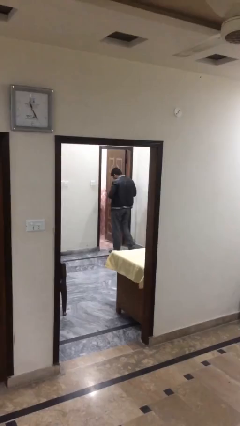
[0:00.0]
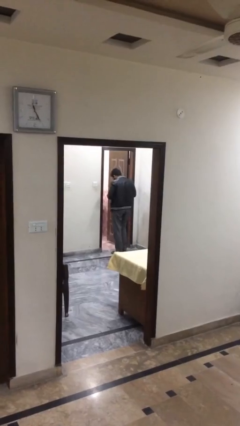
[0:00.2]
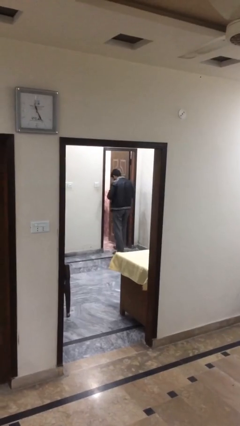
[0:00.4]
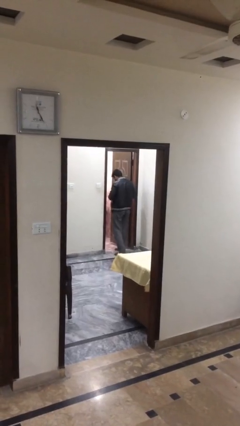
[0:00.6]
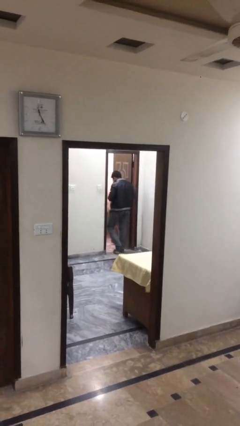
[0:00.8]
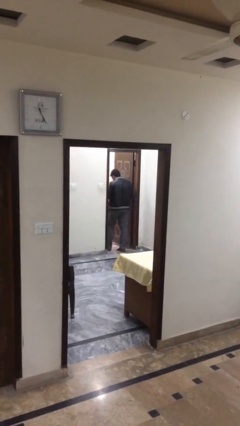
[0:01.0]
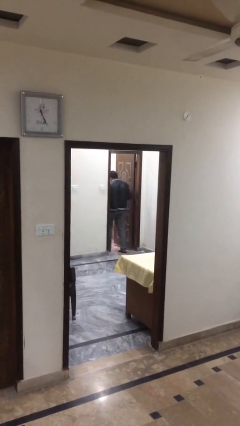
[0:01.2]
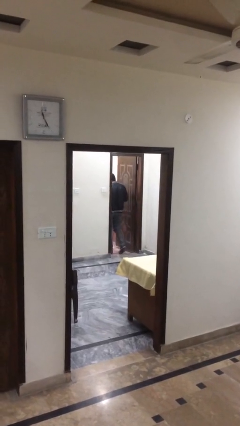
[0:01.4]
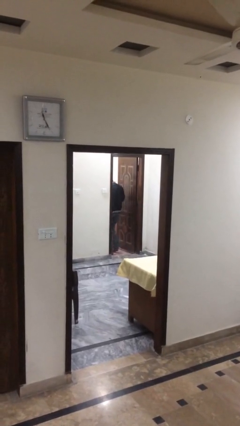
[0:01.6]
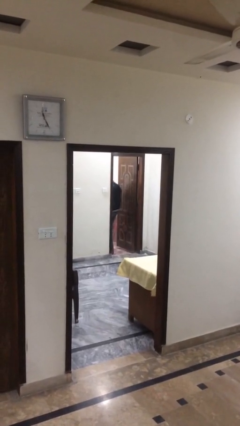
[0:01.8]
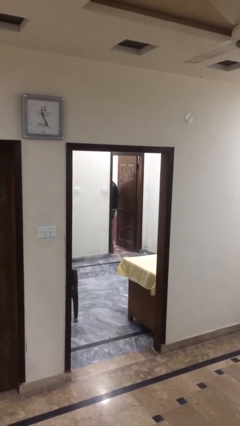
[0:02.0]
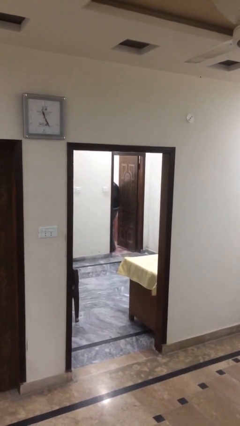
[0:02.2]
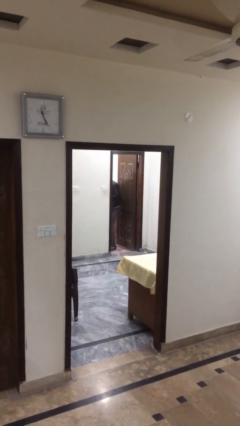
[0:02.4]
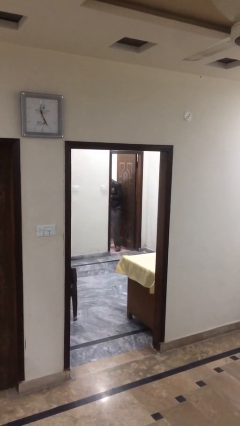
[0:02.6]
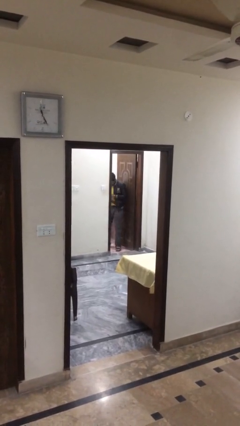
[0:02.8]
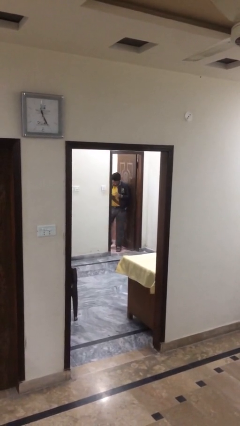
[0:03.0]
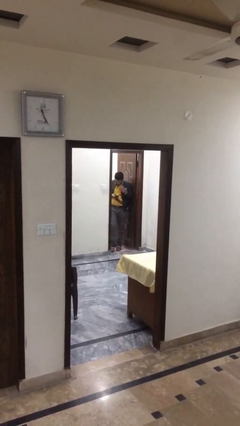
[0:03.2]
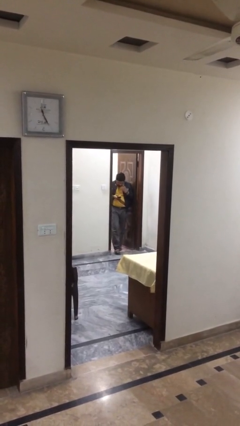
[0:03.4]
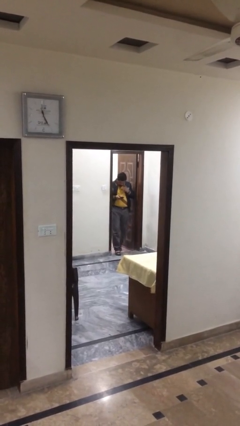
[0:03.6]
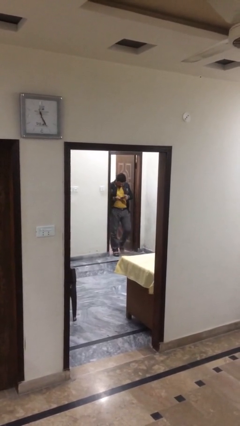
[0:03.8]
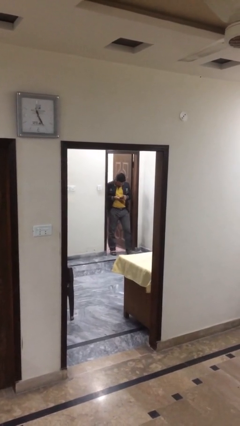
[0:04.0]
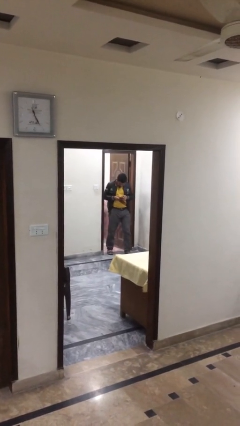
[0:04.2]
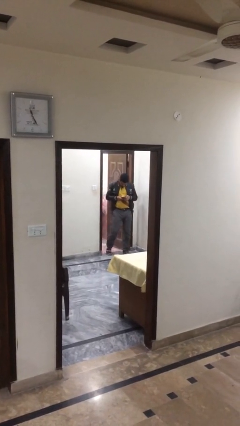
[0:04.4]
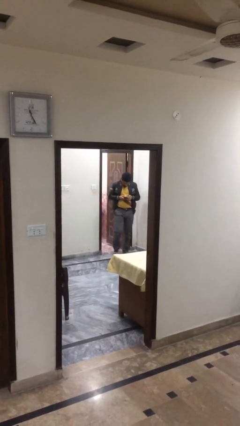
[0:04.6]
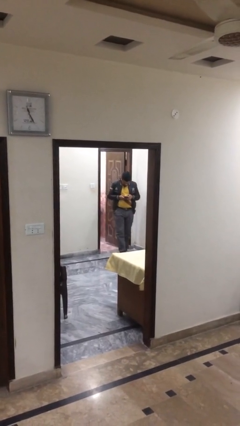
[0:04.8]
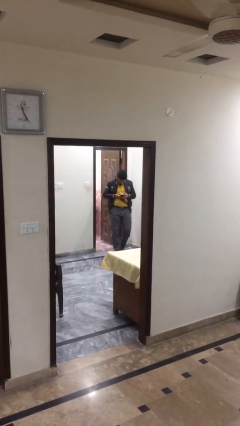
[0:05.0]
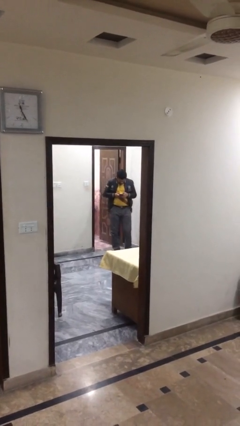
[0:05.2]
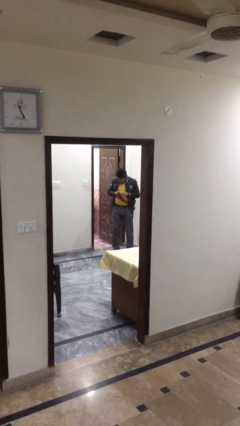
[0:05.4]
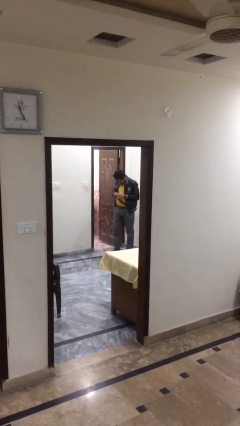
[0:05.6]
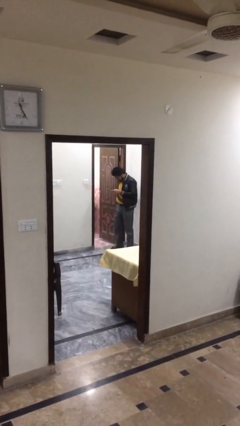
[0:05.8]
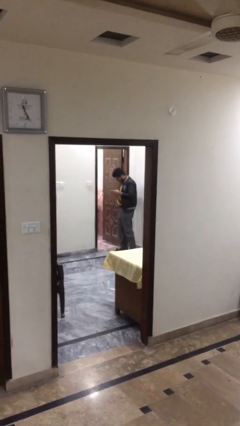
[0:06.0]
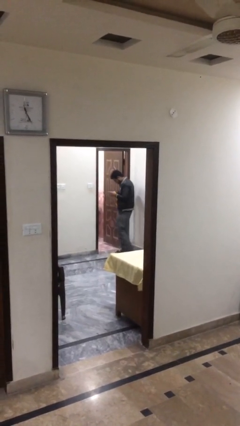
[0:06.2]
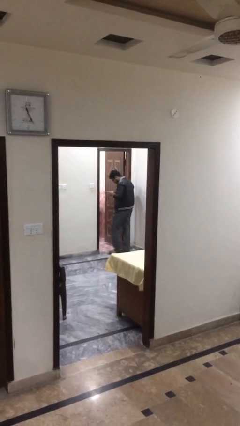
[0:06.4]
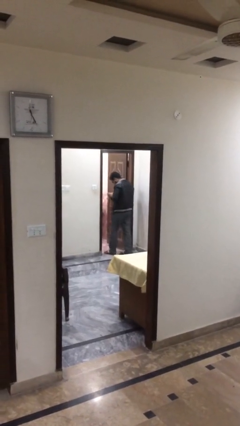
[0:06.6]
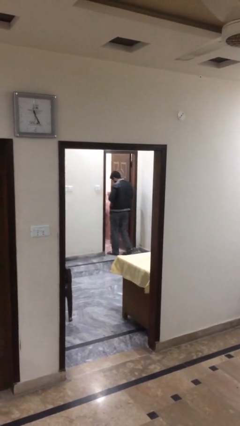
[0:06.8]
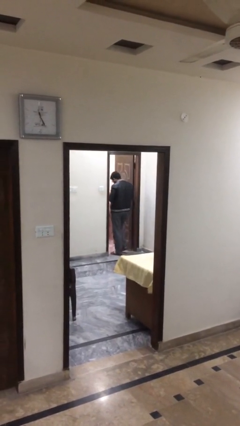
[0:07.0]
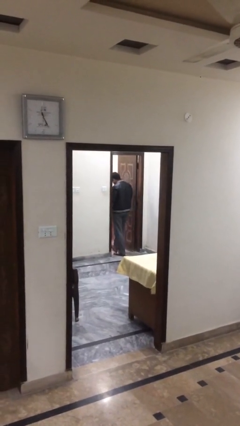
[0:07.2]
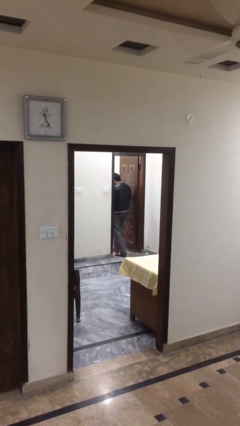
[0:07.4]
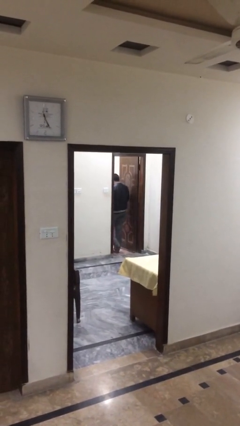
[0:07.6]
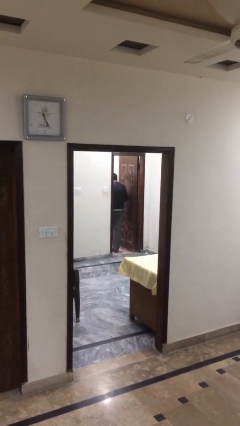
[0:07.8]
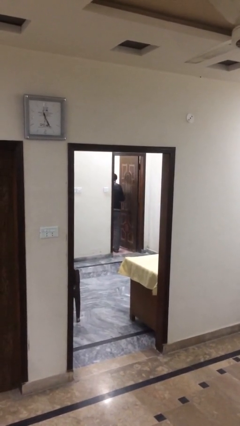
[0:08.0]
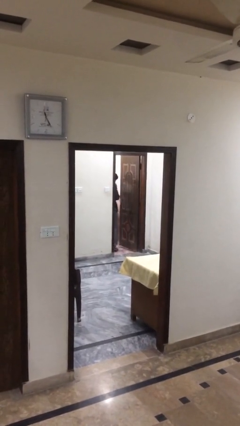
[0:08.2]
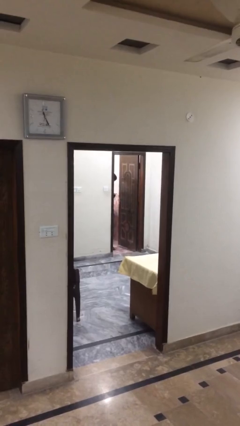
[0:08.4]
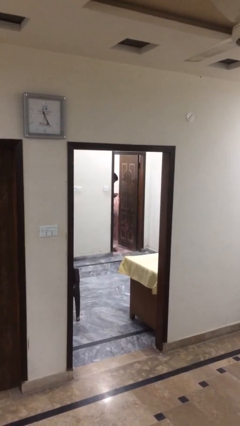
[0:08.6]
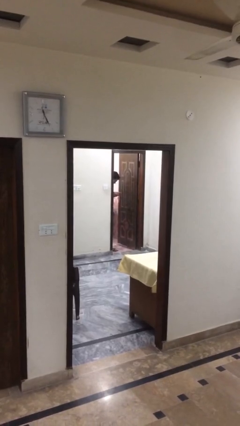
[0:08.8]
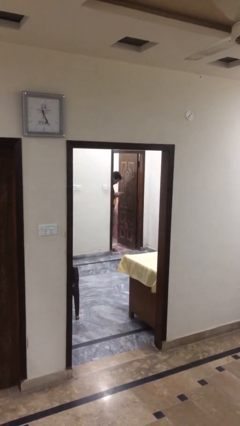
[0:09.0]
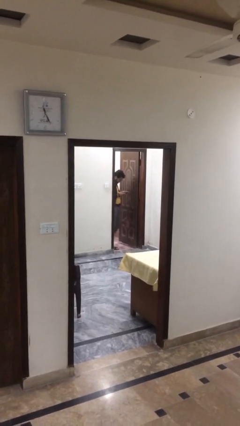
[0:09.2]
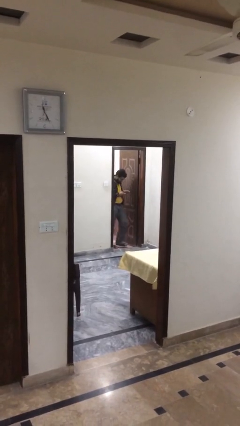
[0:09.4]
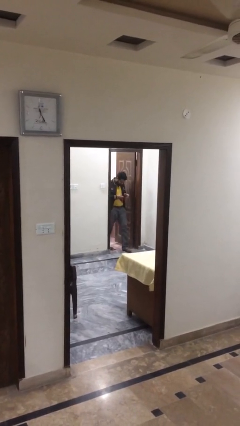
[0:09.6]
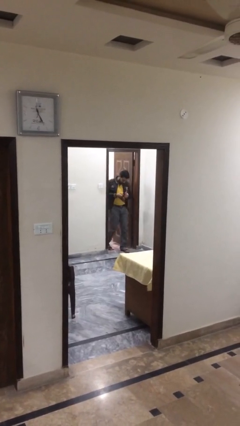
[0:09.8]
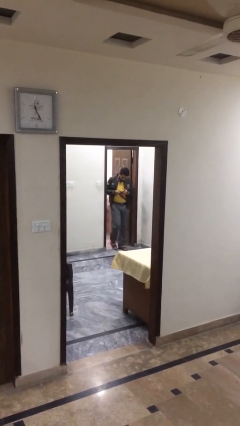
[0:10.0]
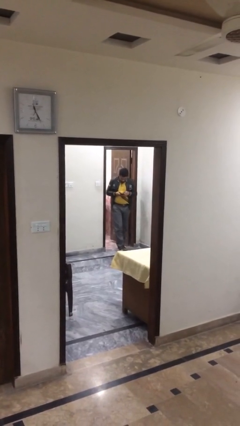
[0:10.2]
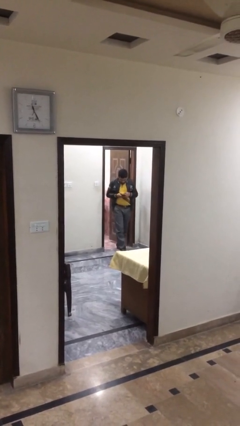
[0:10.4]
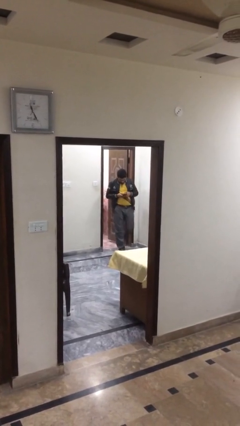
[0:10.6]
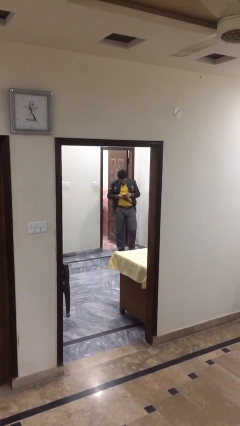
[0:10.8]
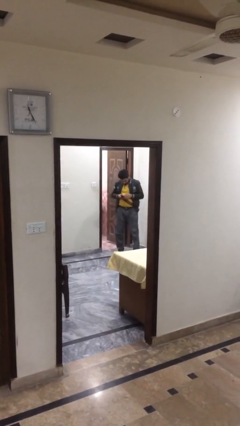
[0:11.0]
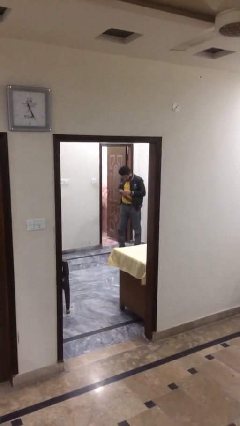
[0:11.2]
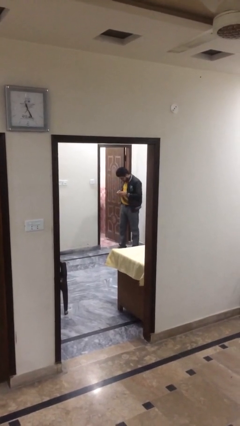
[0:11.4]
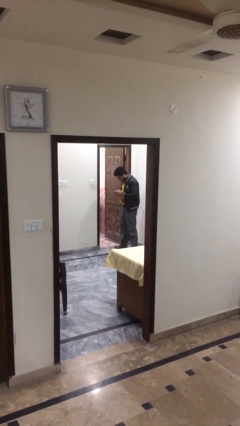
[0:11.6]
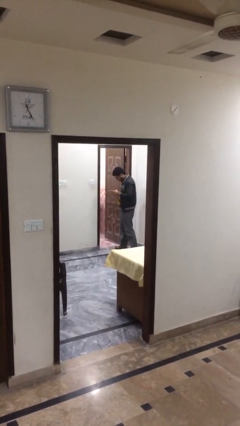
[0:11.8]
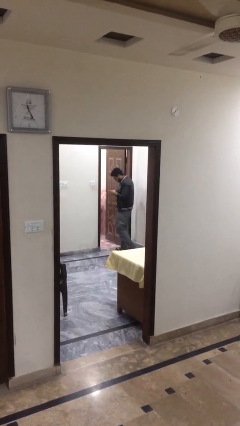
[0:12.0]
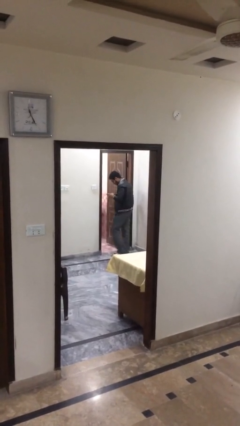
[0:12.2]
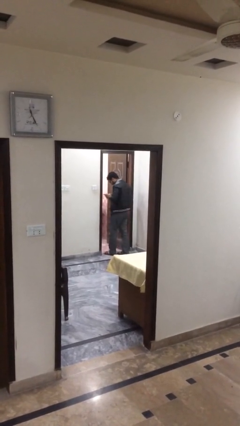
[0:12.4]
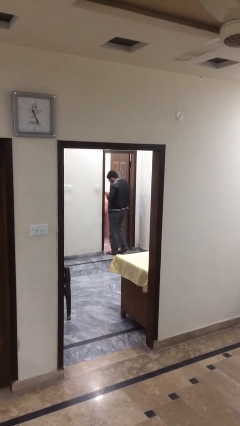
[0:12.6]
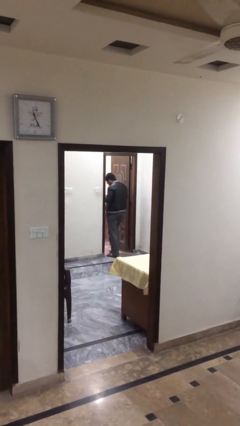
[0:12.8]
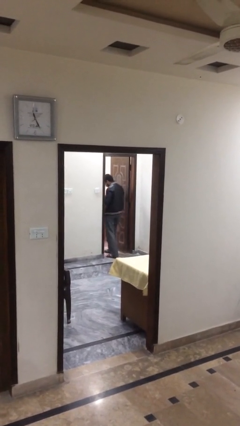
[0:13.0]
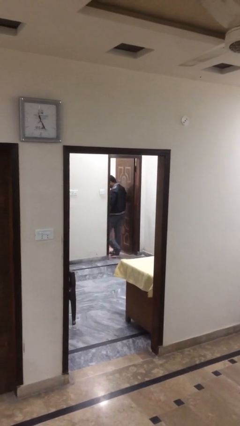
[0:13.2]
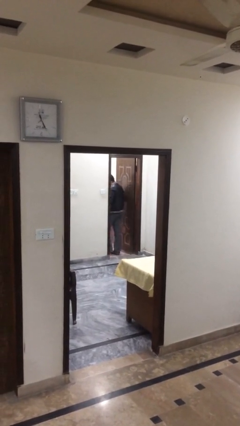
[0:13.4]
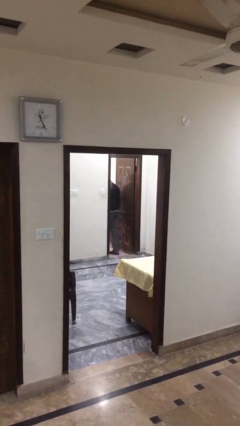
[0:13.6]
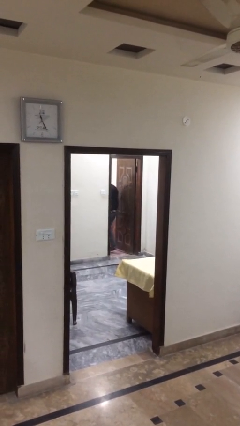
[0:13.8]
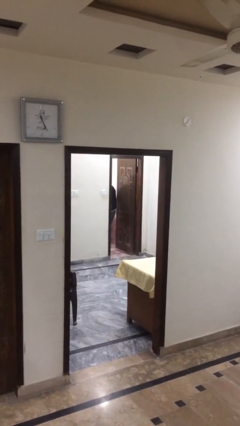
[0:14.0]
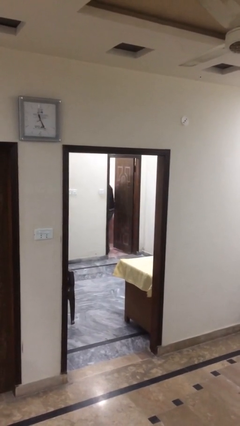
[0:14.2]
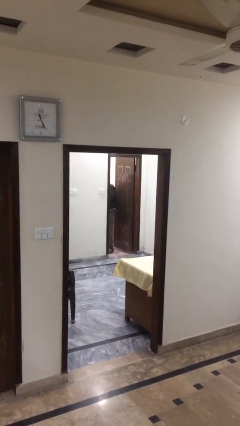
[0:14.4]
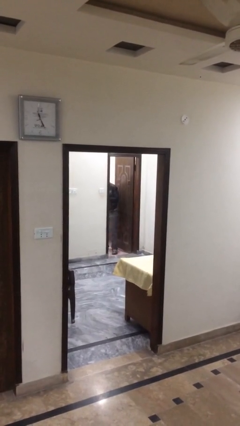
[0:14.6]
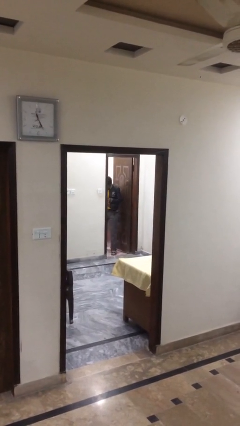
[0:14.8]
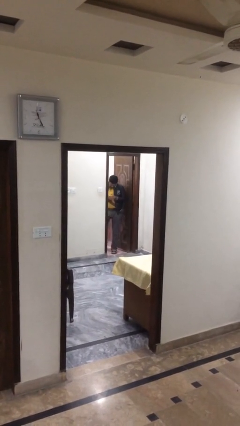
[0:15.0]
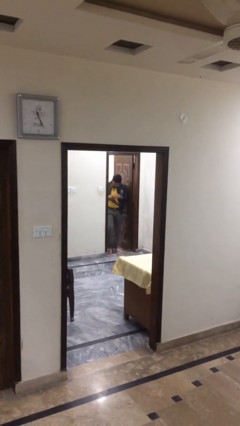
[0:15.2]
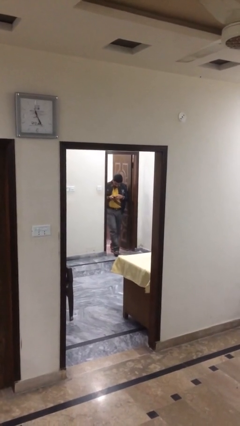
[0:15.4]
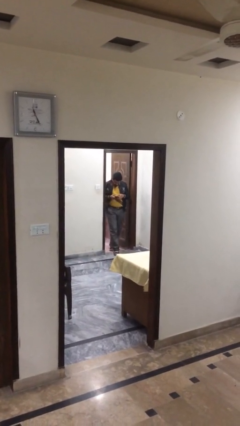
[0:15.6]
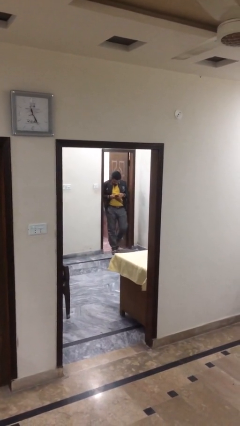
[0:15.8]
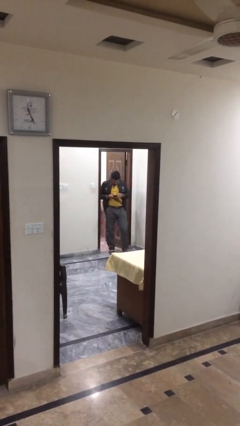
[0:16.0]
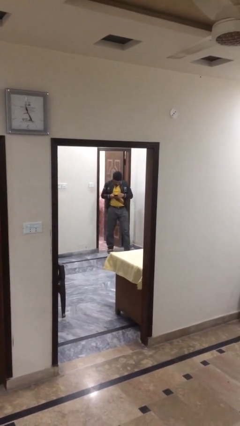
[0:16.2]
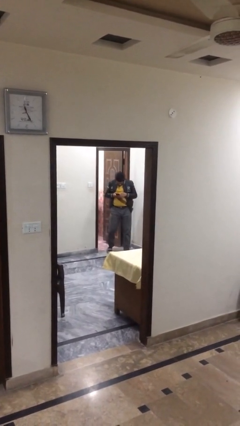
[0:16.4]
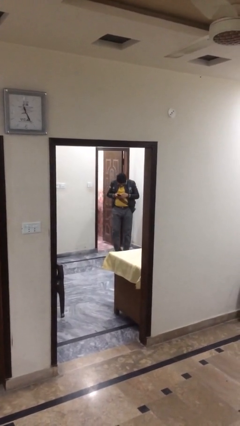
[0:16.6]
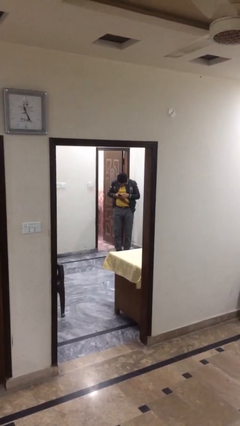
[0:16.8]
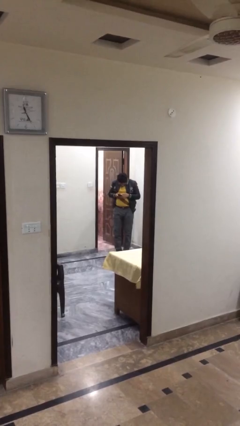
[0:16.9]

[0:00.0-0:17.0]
person texts on phone

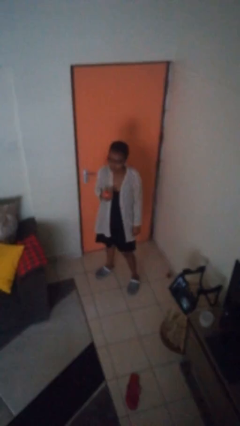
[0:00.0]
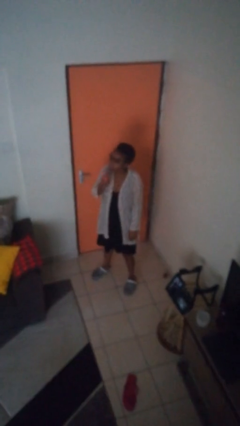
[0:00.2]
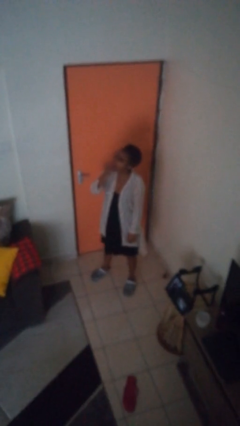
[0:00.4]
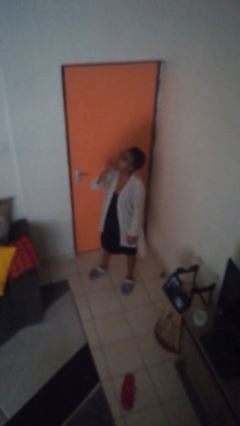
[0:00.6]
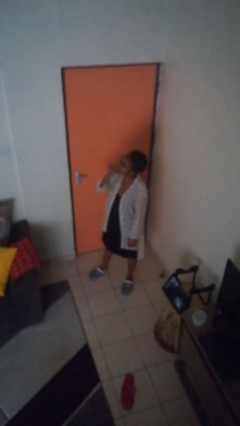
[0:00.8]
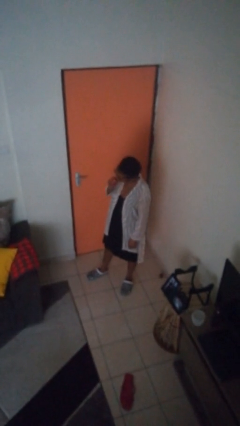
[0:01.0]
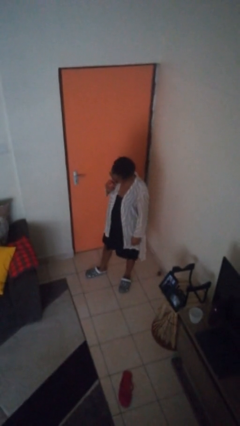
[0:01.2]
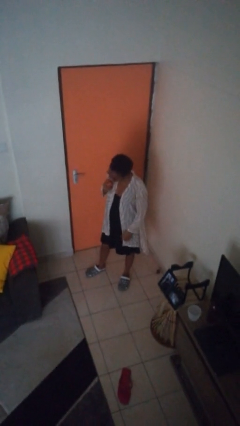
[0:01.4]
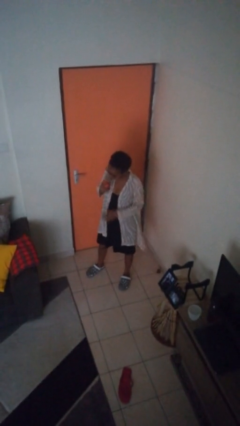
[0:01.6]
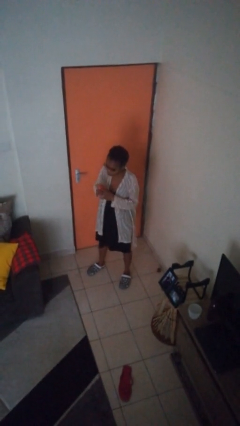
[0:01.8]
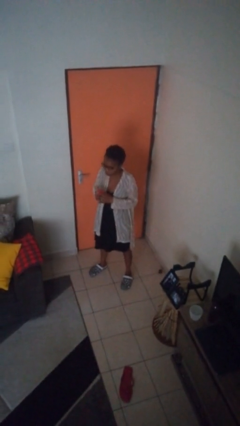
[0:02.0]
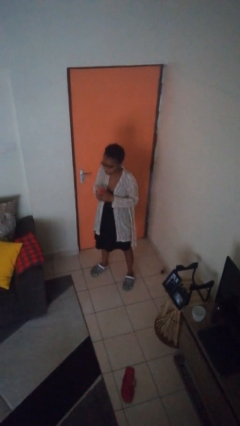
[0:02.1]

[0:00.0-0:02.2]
person eats apple
